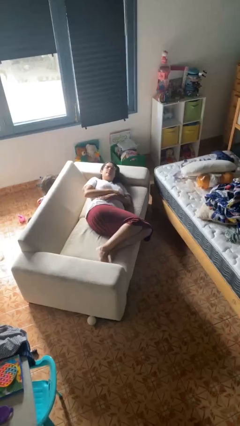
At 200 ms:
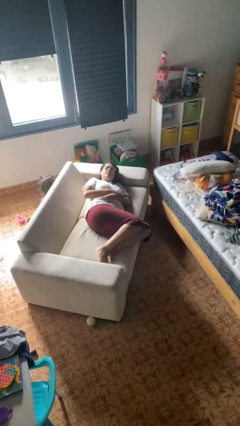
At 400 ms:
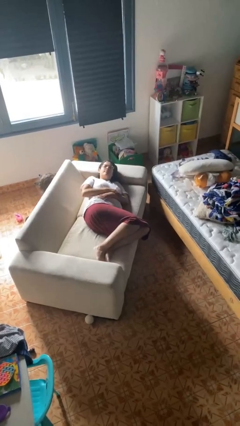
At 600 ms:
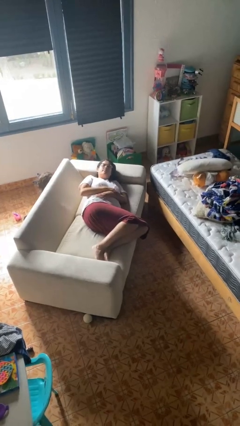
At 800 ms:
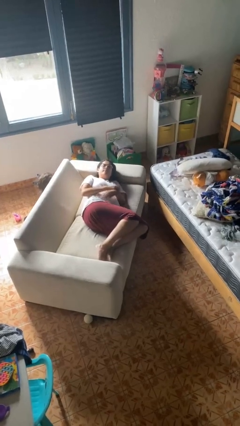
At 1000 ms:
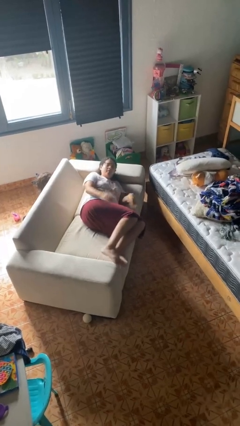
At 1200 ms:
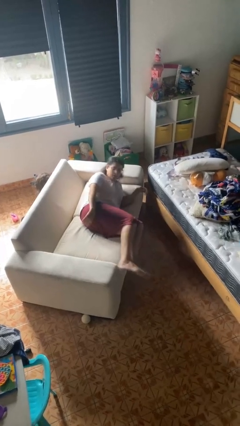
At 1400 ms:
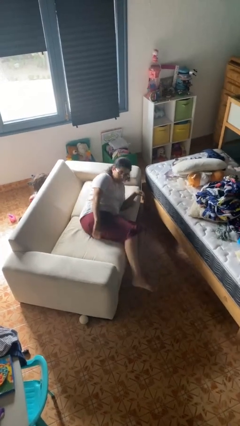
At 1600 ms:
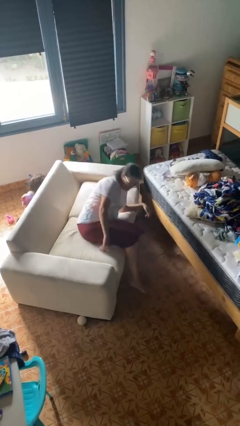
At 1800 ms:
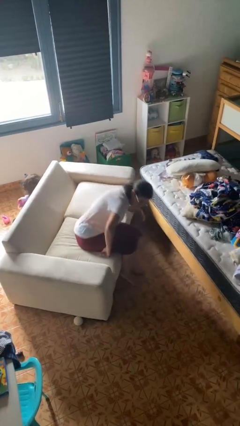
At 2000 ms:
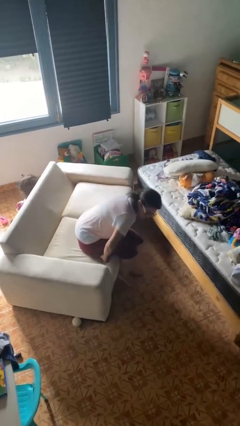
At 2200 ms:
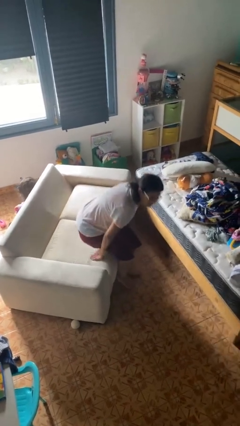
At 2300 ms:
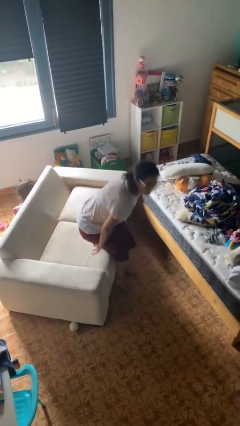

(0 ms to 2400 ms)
person stands up

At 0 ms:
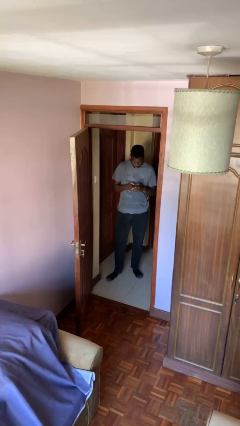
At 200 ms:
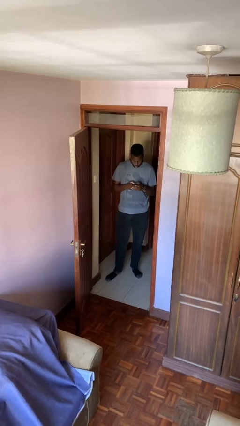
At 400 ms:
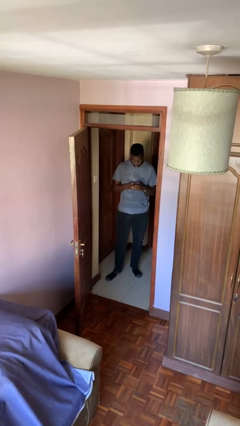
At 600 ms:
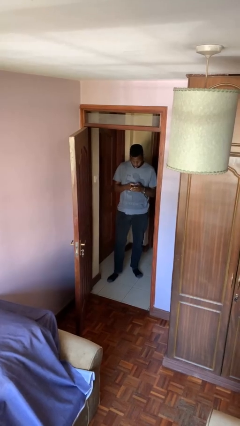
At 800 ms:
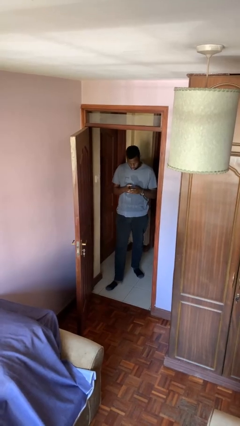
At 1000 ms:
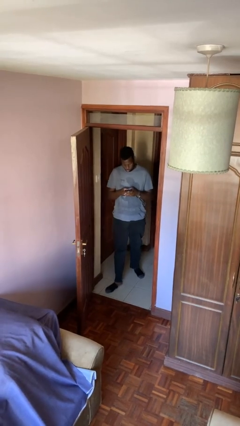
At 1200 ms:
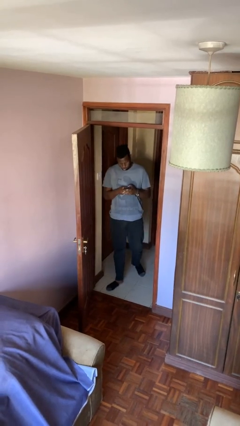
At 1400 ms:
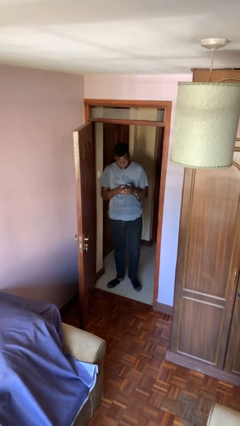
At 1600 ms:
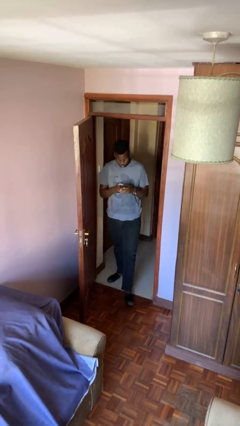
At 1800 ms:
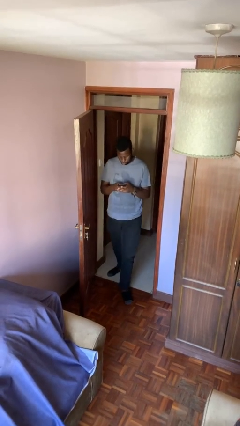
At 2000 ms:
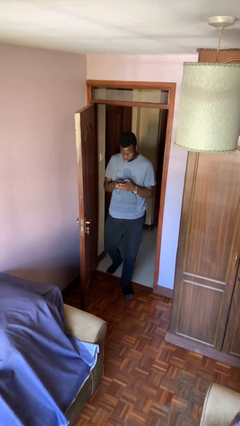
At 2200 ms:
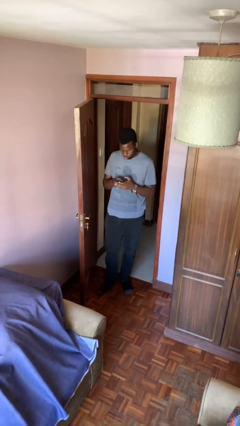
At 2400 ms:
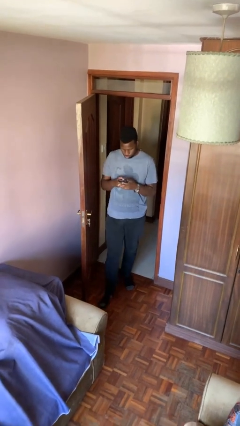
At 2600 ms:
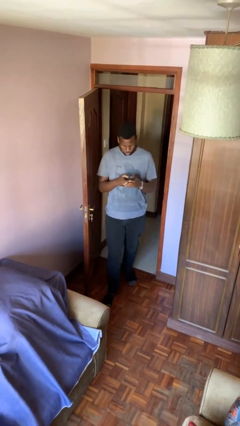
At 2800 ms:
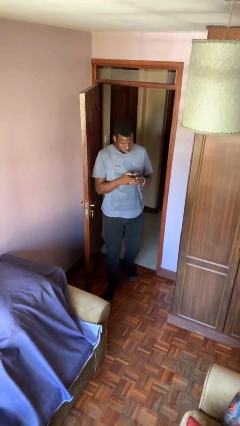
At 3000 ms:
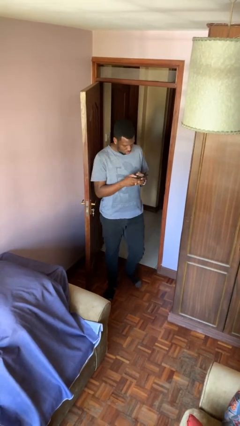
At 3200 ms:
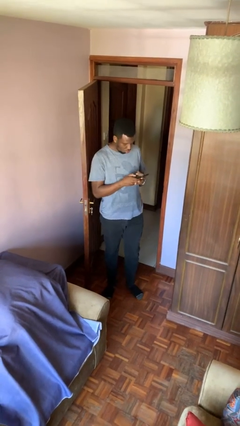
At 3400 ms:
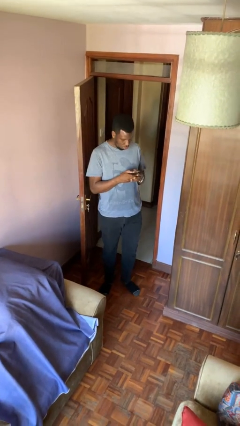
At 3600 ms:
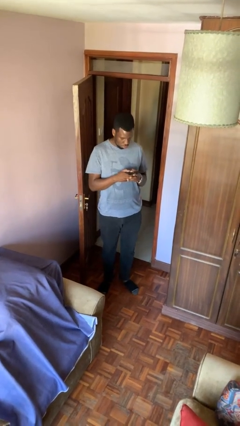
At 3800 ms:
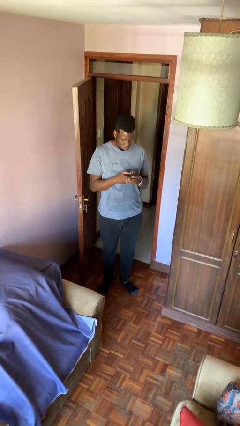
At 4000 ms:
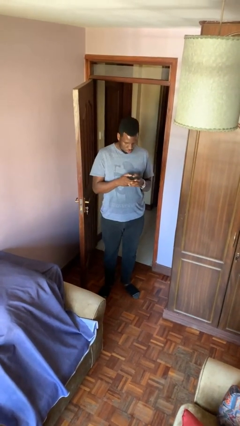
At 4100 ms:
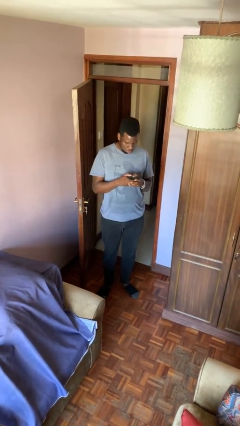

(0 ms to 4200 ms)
person enters scene through structure

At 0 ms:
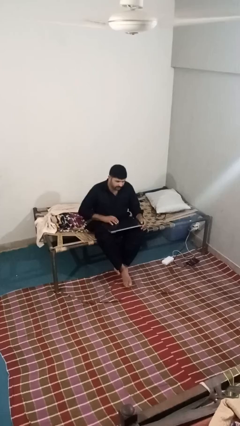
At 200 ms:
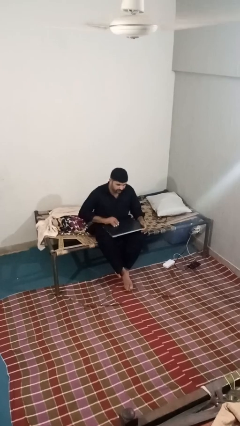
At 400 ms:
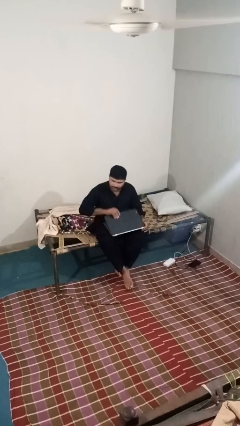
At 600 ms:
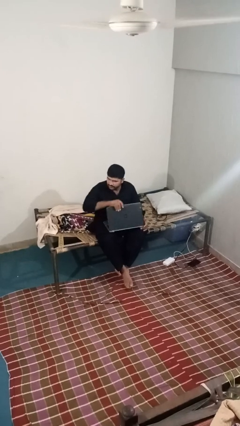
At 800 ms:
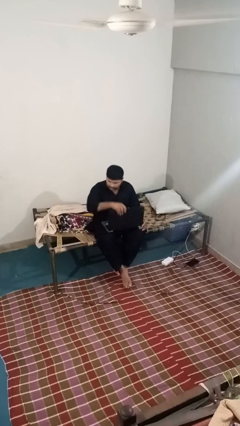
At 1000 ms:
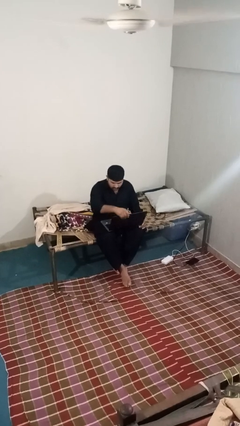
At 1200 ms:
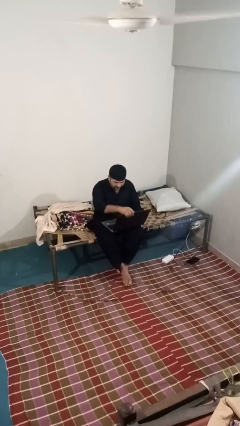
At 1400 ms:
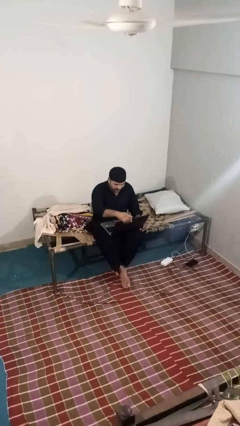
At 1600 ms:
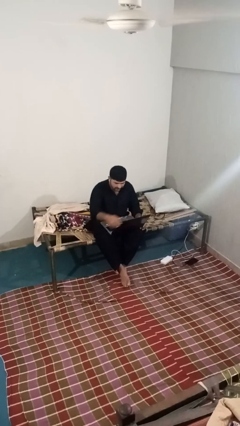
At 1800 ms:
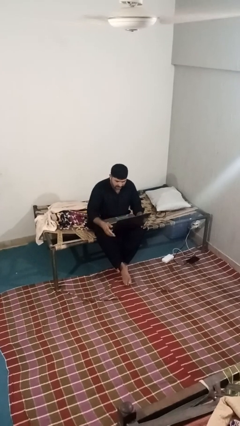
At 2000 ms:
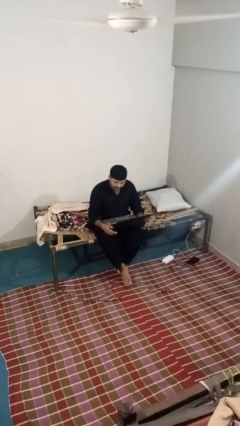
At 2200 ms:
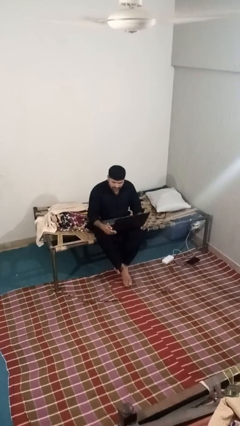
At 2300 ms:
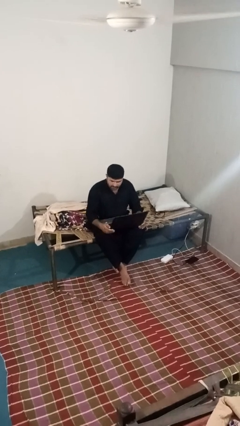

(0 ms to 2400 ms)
person opens laptop

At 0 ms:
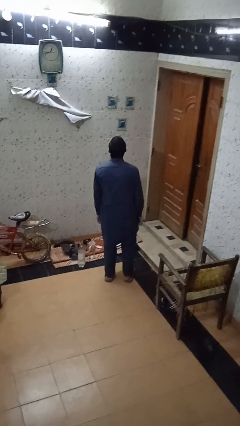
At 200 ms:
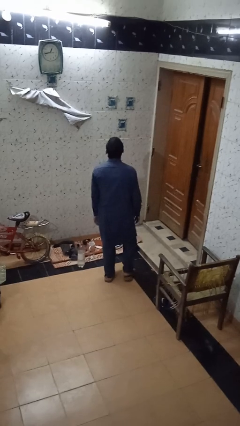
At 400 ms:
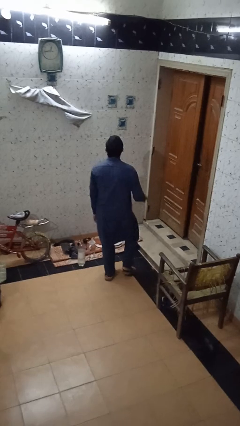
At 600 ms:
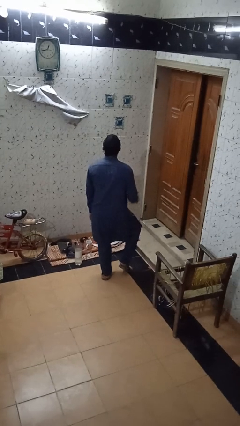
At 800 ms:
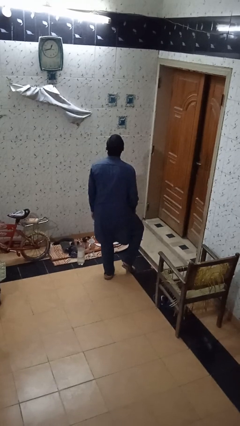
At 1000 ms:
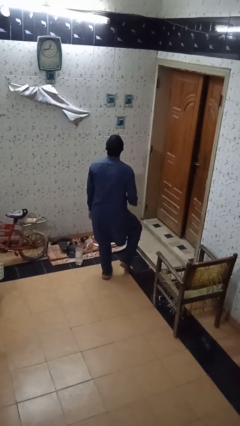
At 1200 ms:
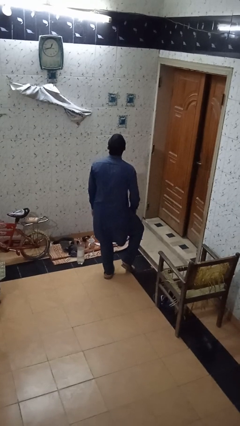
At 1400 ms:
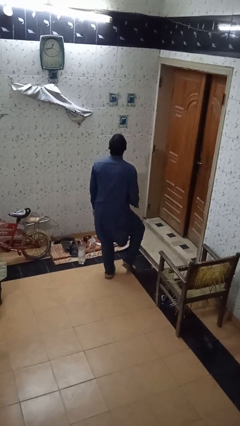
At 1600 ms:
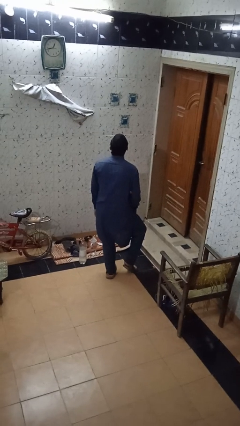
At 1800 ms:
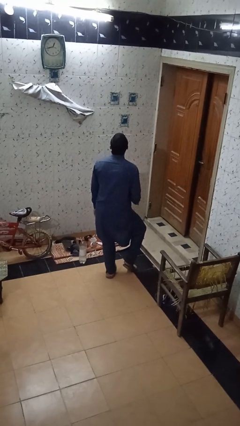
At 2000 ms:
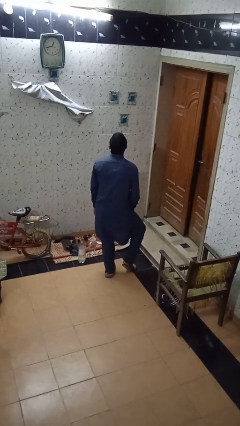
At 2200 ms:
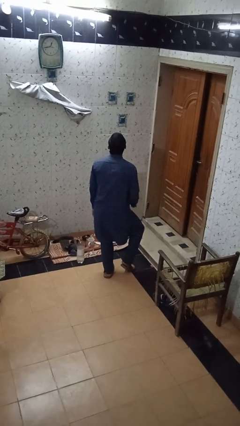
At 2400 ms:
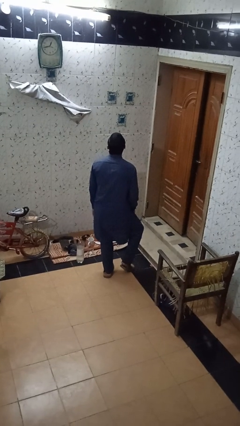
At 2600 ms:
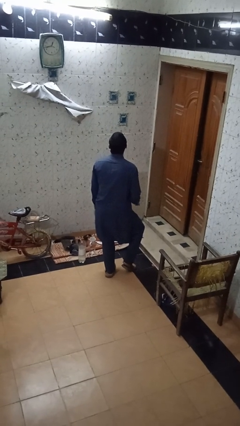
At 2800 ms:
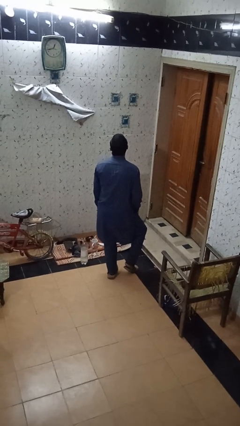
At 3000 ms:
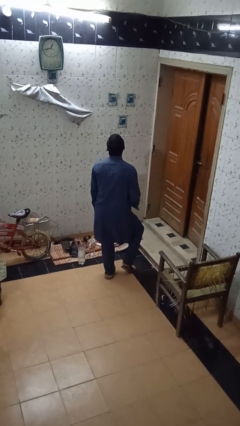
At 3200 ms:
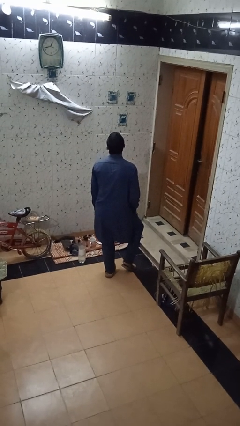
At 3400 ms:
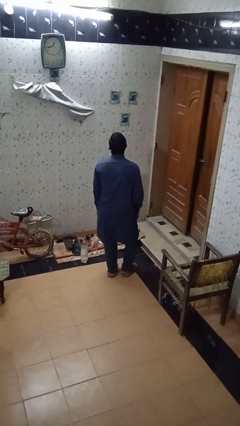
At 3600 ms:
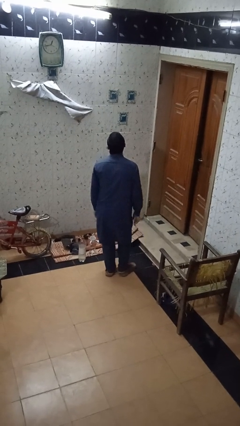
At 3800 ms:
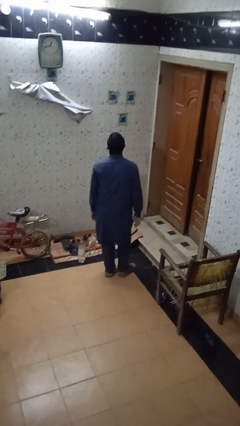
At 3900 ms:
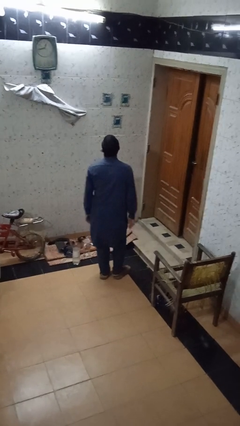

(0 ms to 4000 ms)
person slaps hands on thighs

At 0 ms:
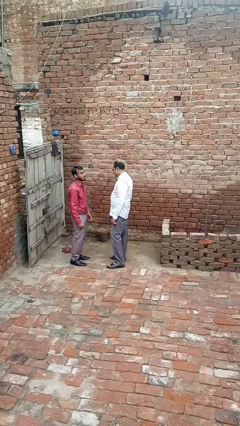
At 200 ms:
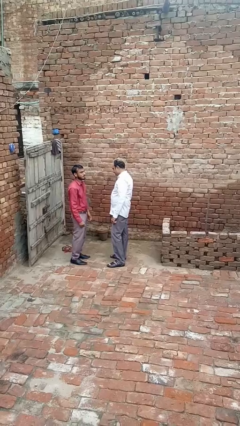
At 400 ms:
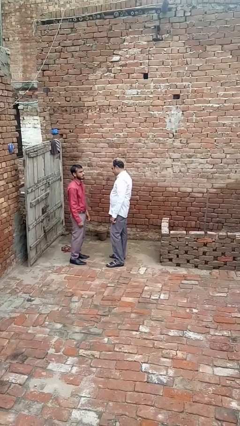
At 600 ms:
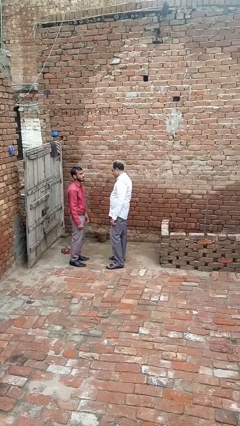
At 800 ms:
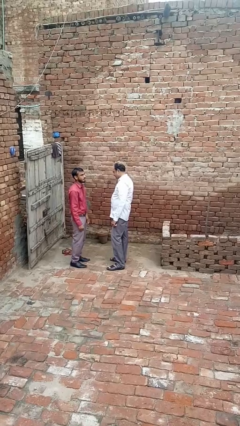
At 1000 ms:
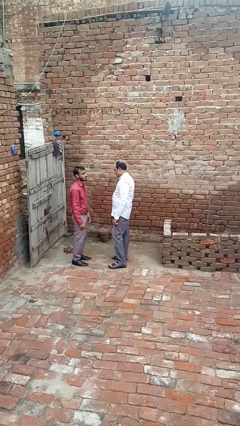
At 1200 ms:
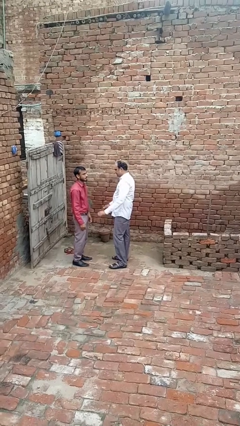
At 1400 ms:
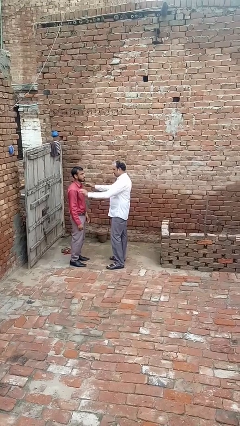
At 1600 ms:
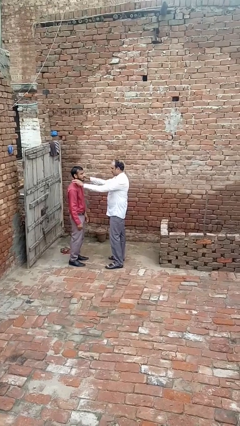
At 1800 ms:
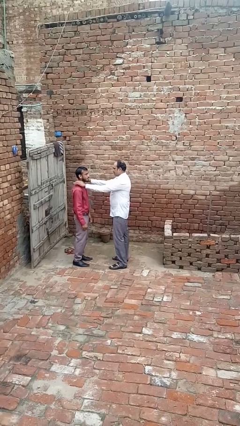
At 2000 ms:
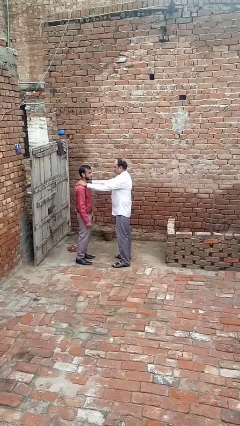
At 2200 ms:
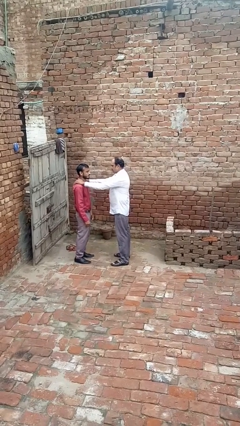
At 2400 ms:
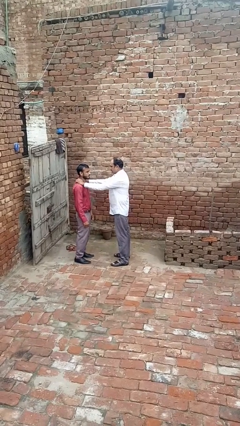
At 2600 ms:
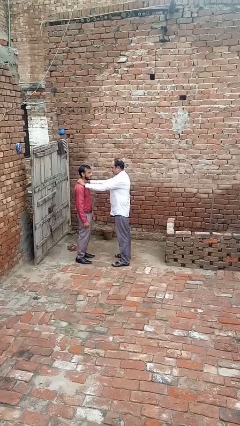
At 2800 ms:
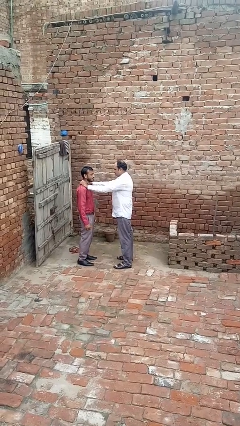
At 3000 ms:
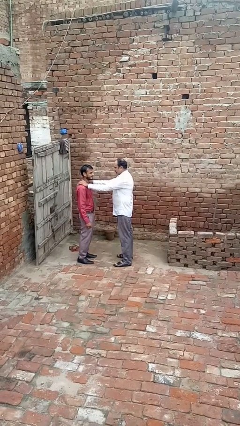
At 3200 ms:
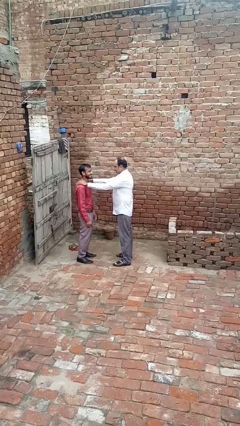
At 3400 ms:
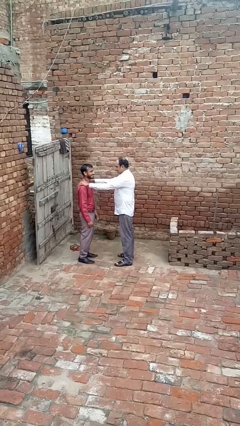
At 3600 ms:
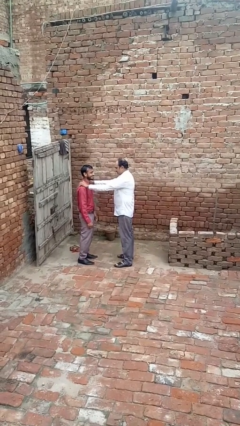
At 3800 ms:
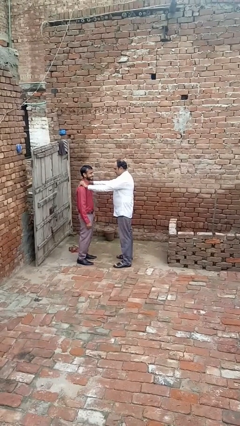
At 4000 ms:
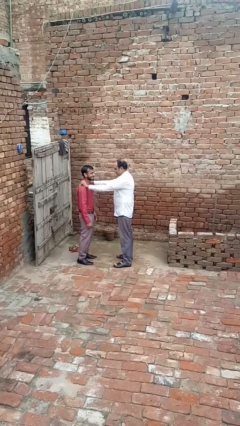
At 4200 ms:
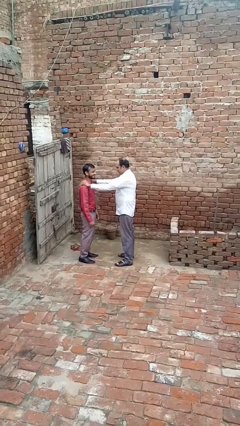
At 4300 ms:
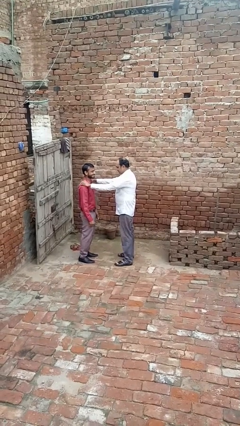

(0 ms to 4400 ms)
person pounds shoulders of person
